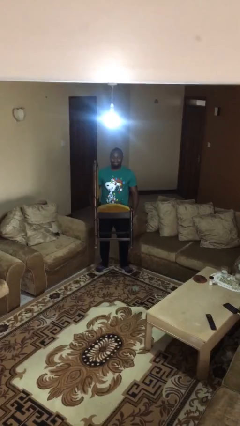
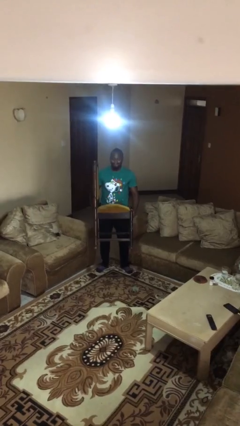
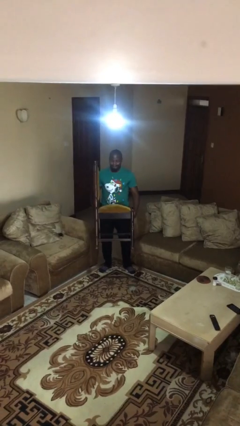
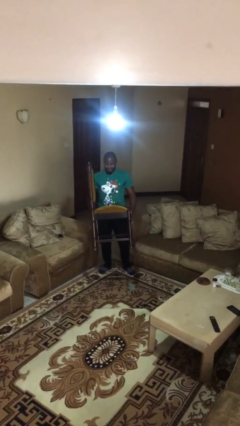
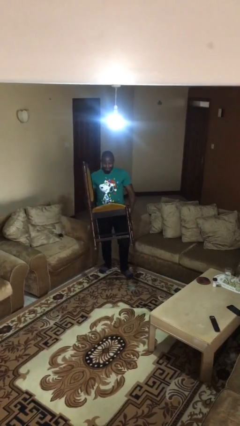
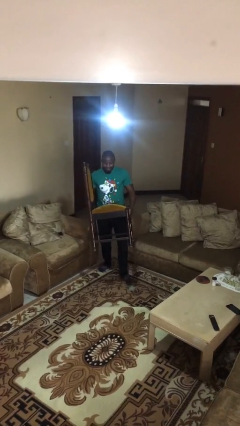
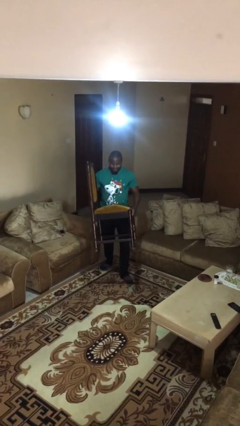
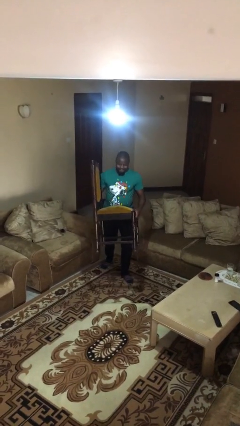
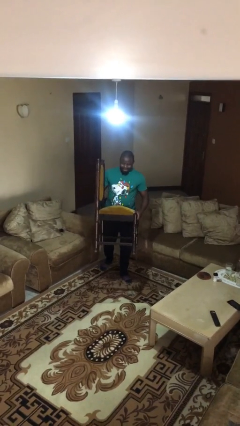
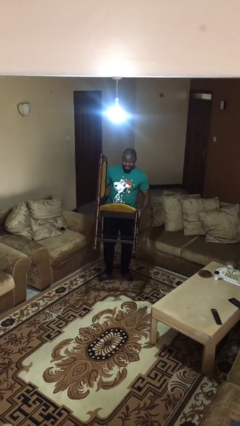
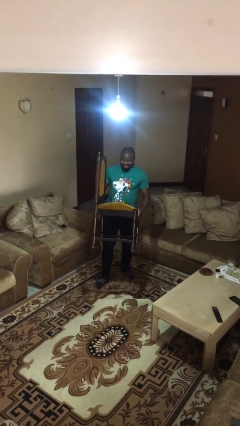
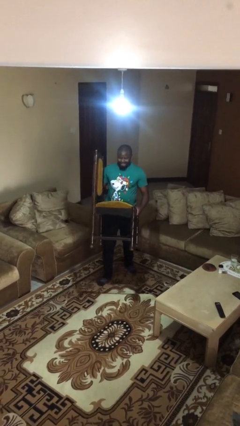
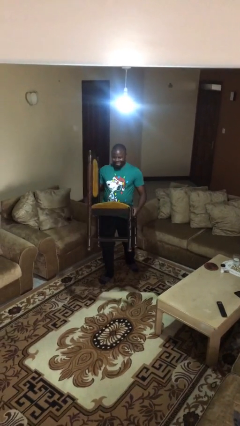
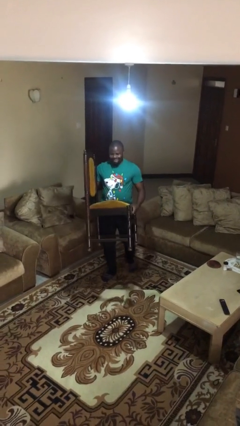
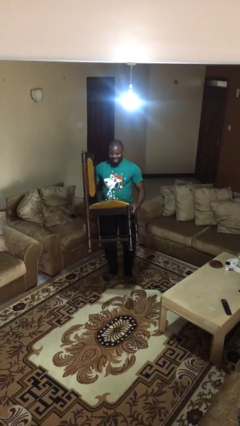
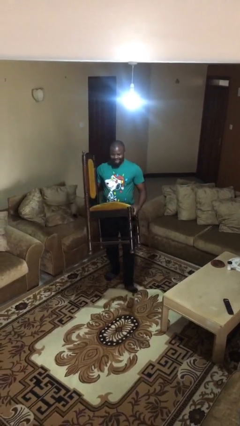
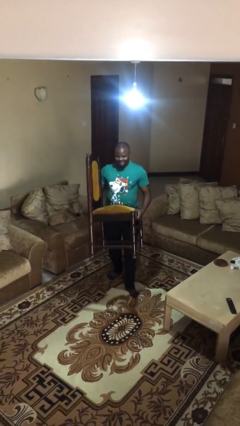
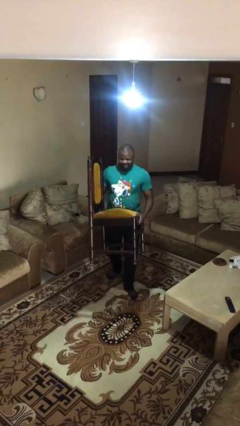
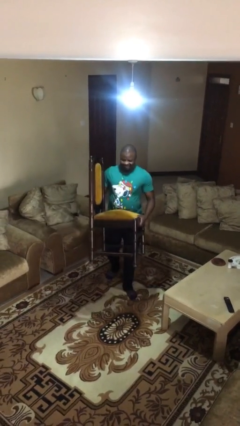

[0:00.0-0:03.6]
person carries heavy object

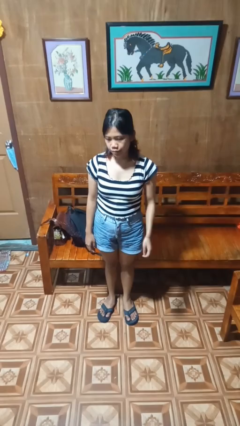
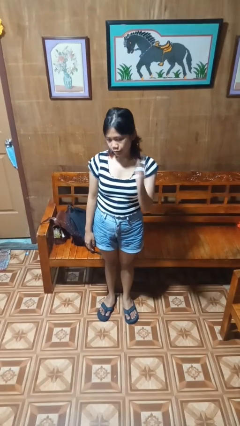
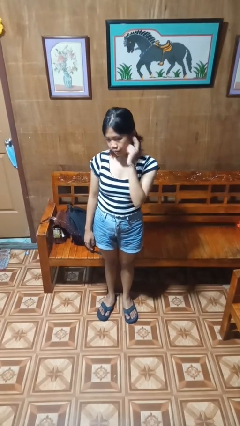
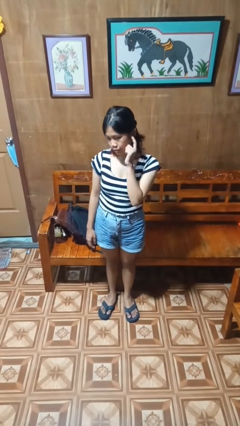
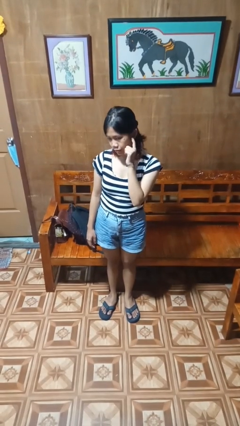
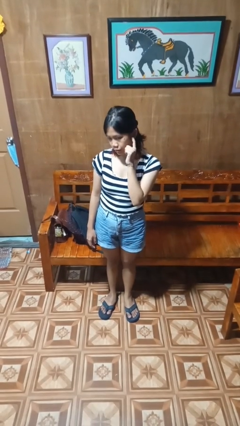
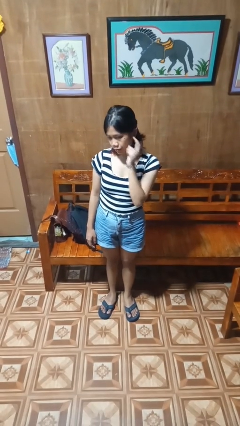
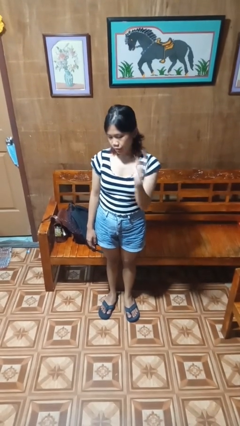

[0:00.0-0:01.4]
person gestures listen closely

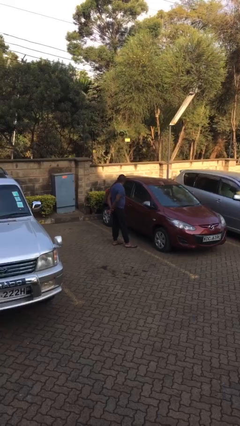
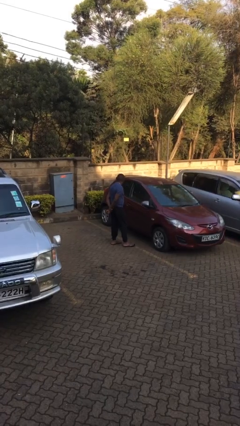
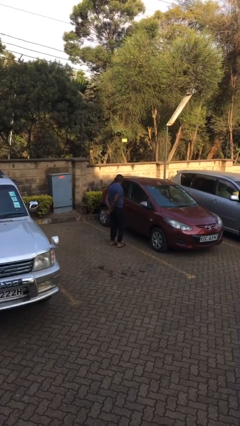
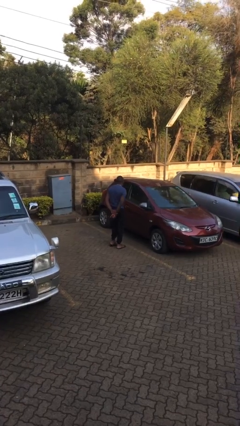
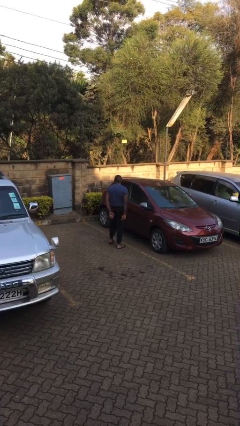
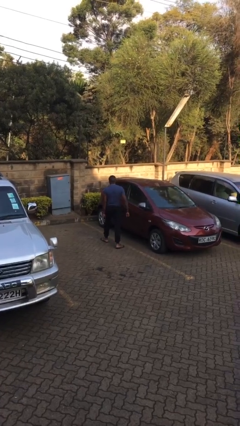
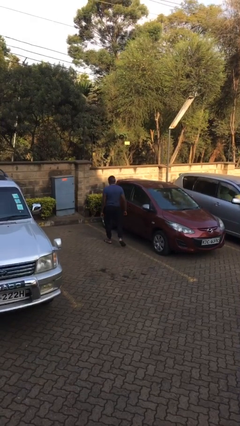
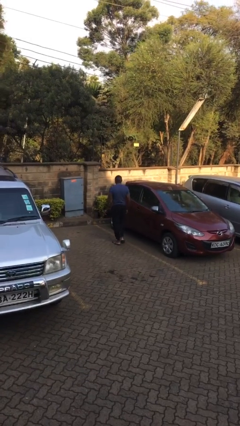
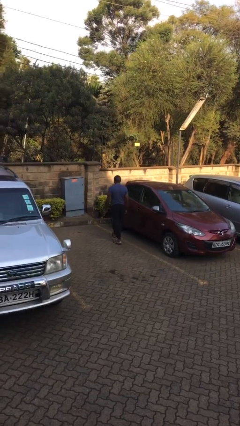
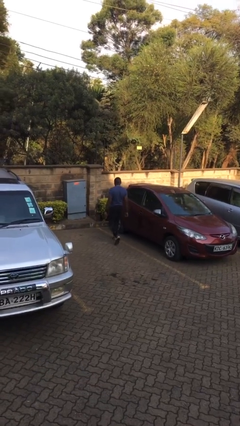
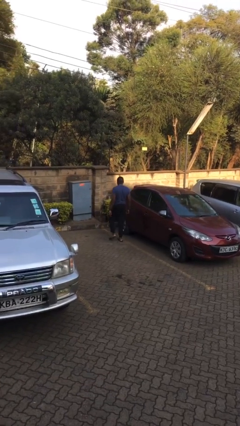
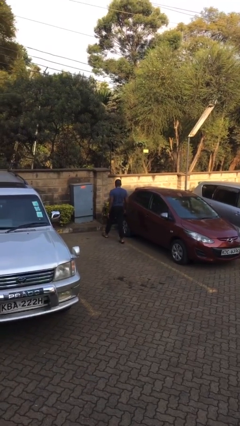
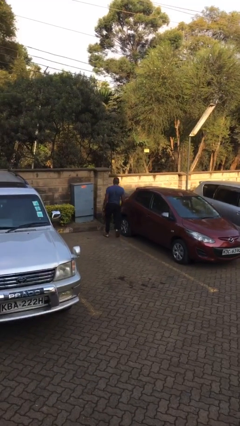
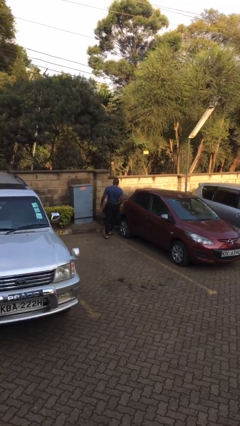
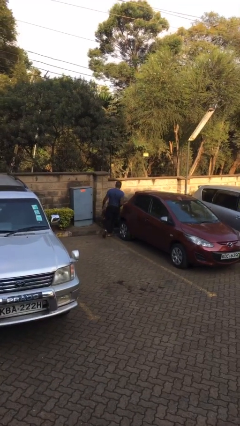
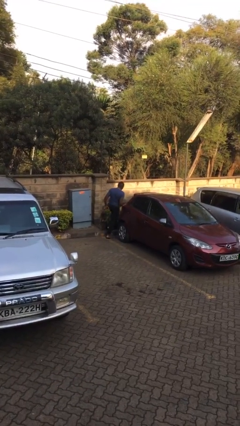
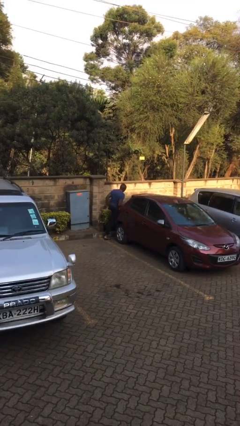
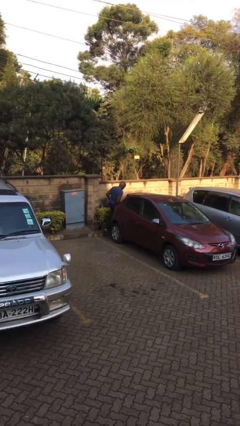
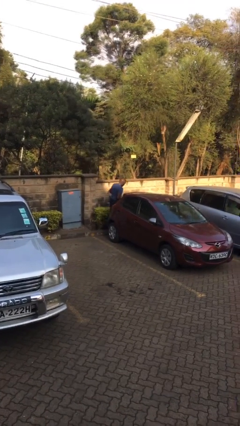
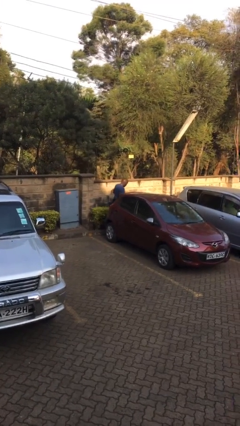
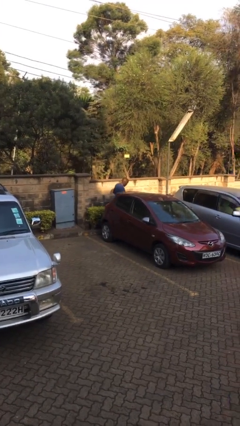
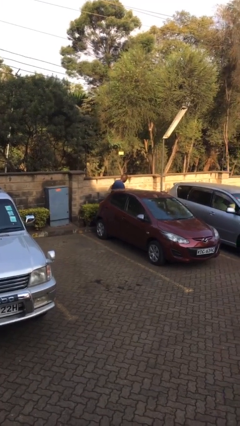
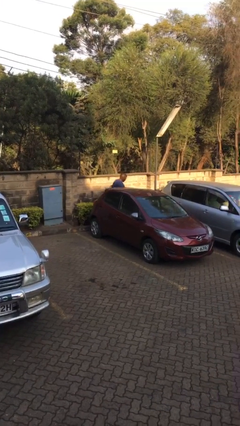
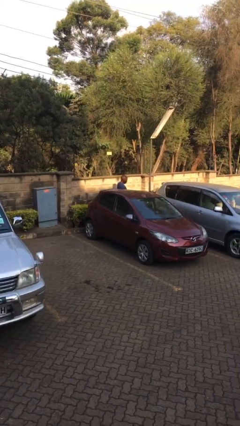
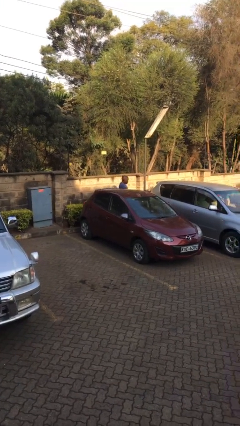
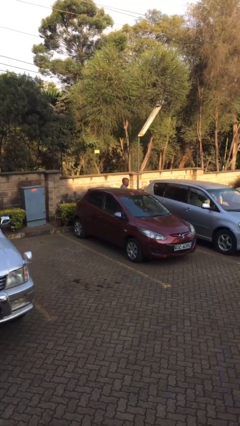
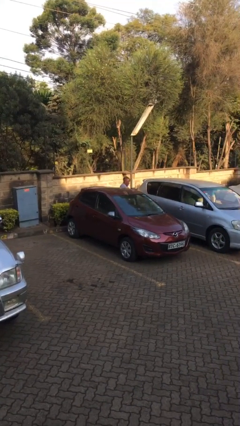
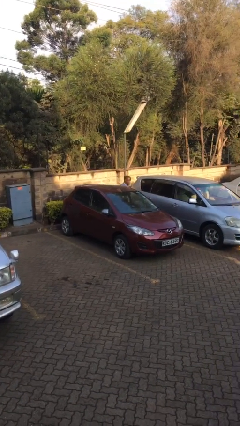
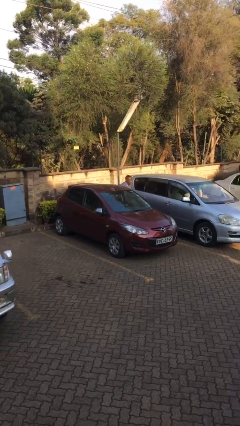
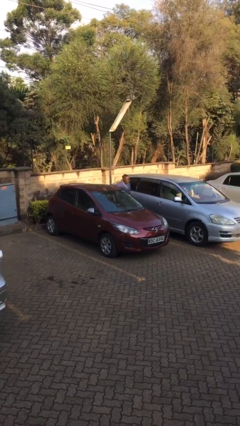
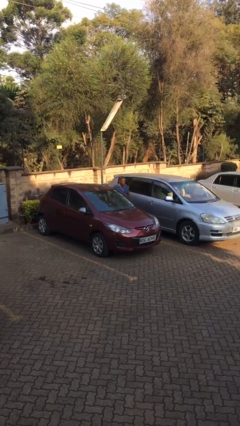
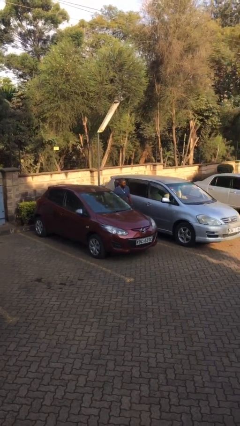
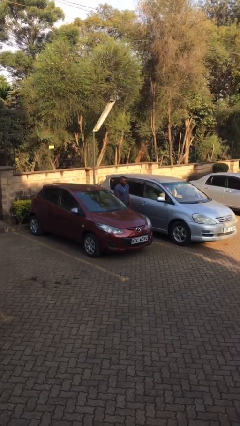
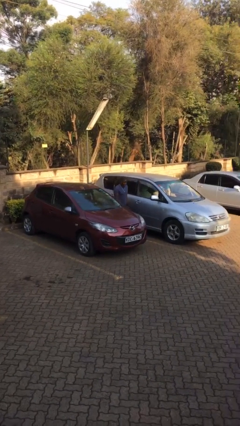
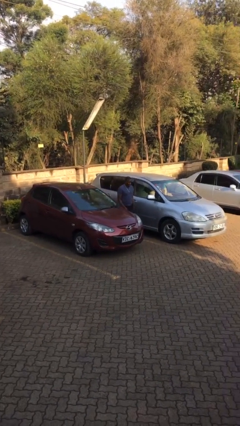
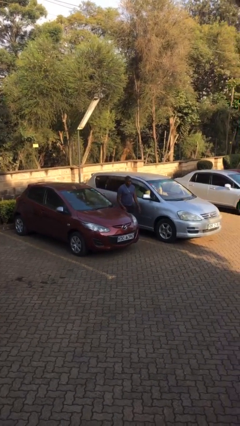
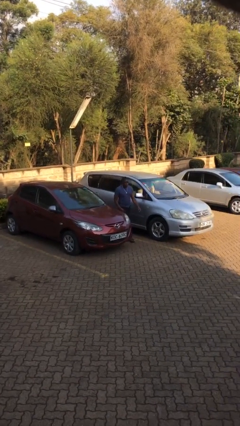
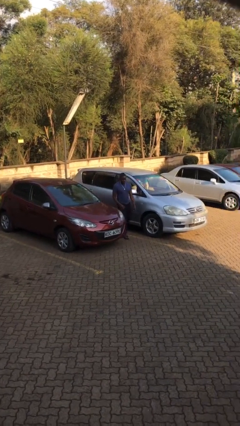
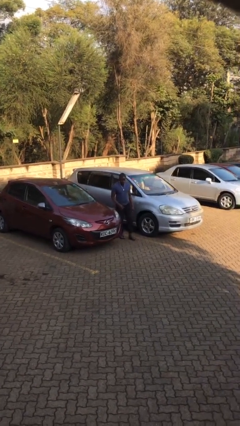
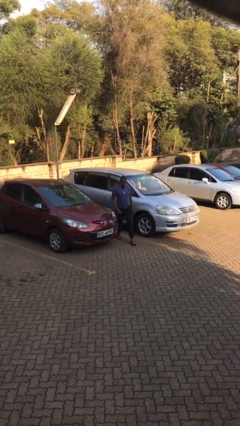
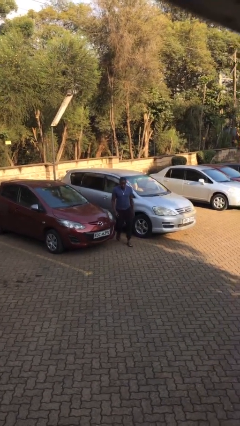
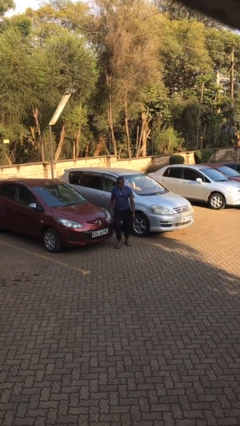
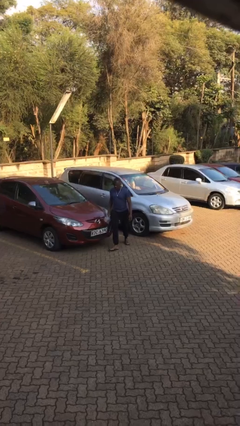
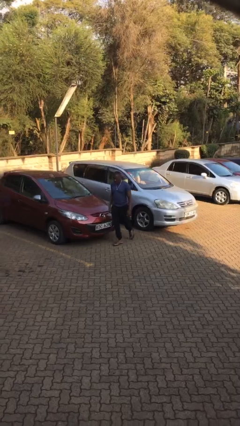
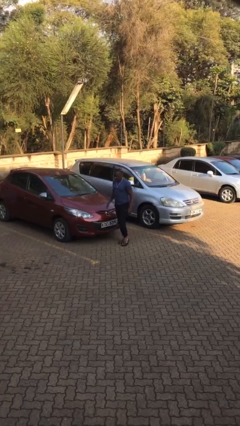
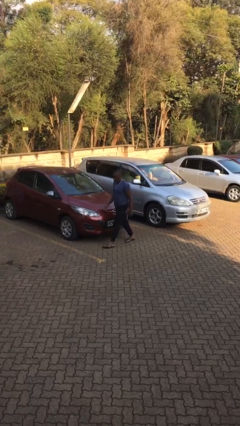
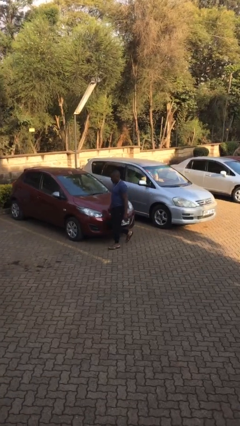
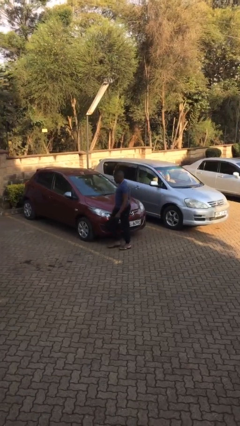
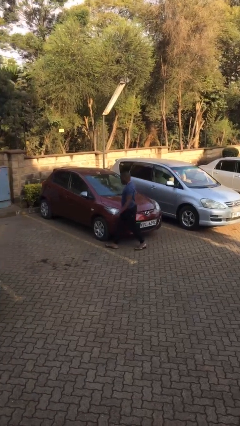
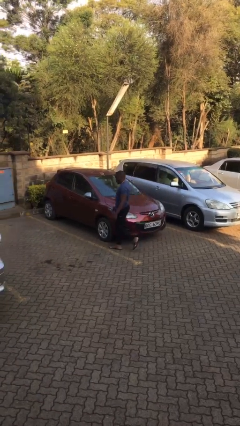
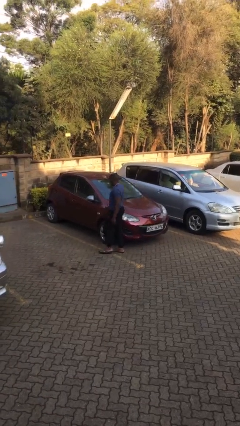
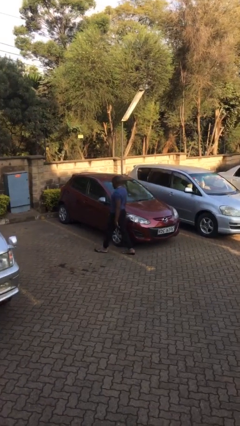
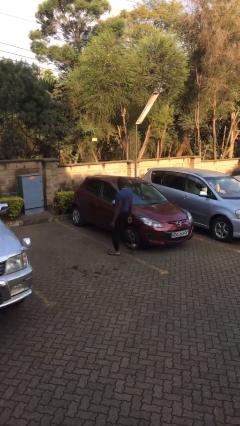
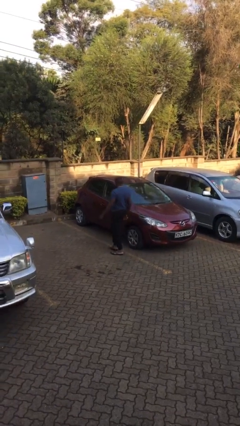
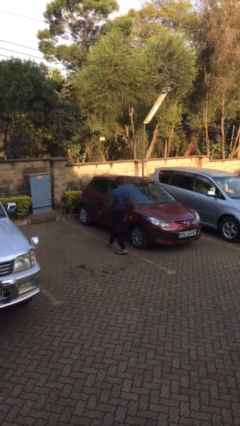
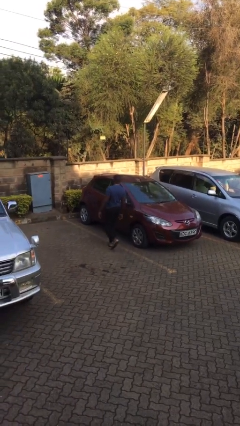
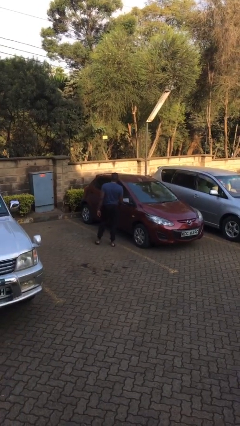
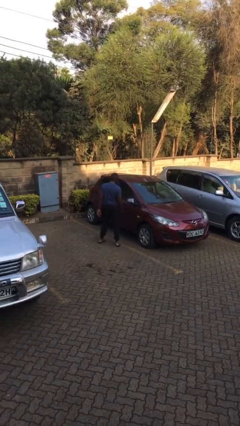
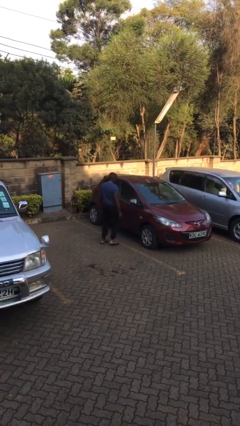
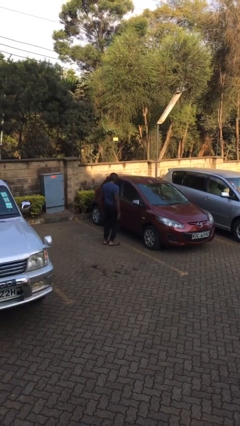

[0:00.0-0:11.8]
person walks around car

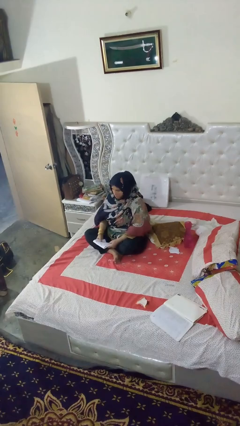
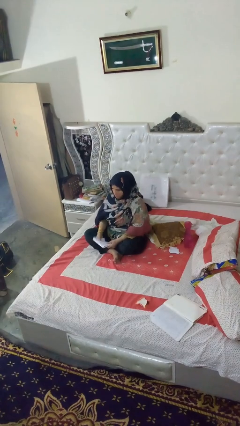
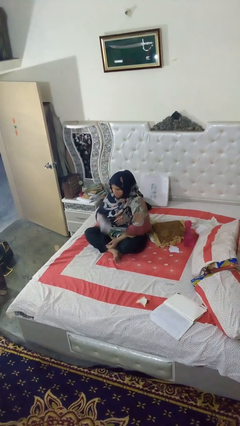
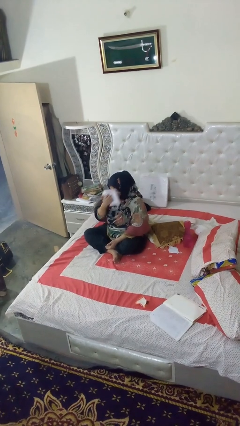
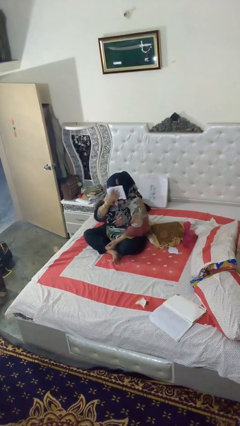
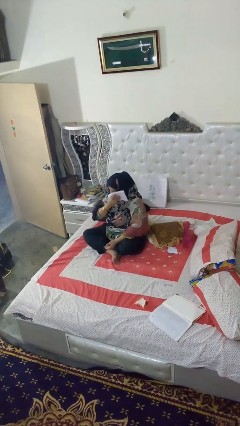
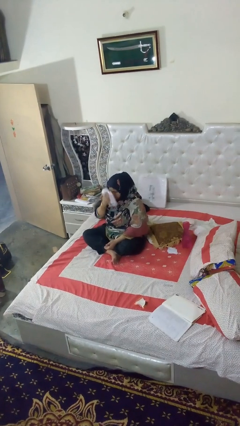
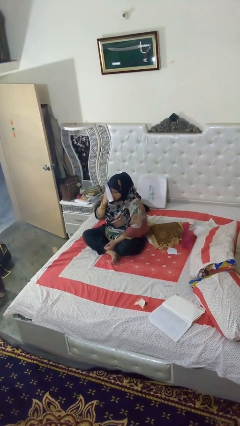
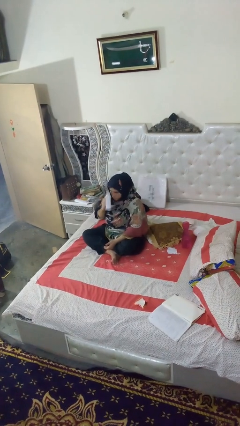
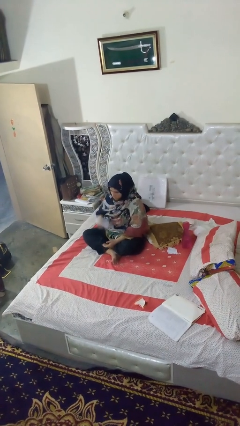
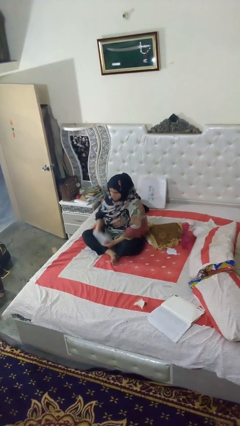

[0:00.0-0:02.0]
person wipes mouth with napkin
